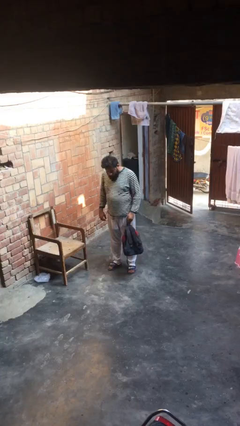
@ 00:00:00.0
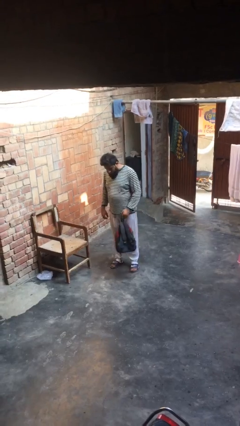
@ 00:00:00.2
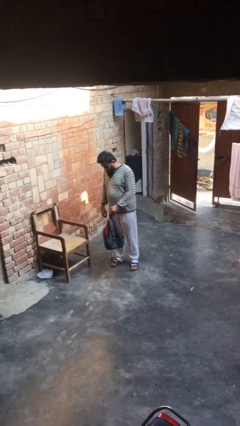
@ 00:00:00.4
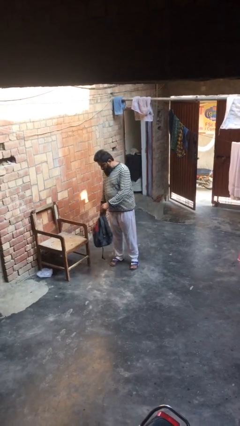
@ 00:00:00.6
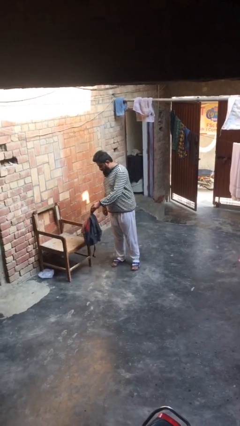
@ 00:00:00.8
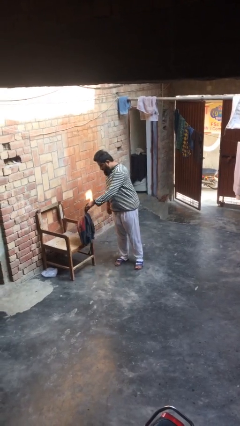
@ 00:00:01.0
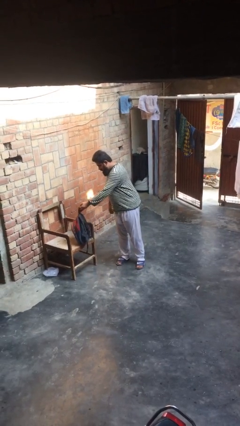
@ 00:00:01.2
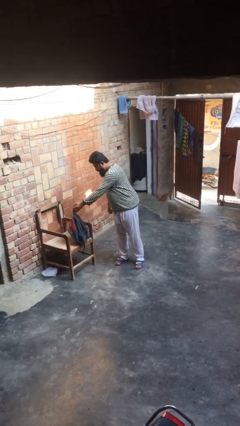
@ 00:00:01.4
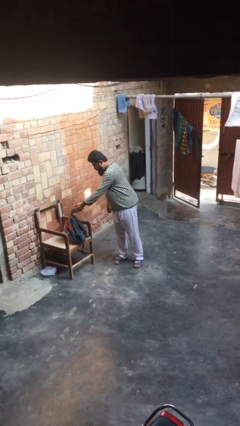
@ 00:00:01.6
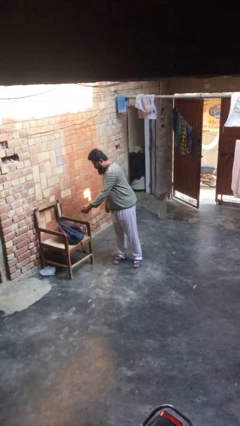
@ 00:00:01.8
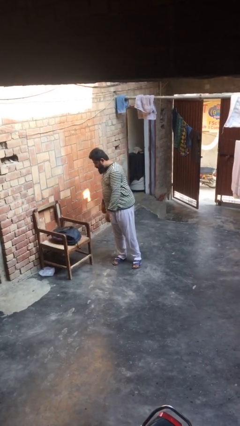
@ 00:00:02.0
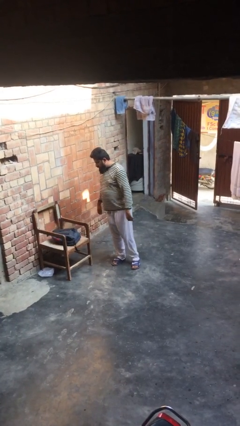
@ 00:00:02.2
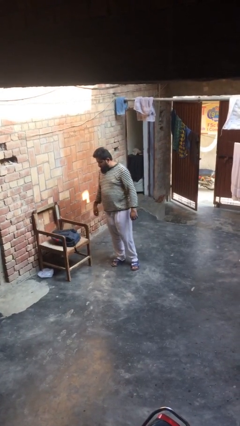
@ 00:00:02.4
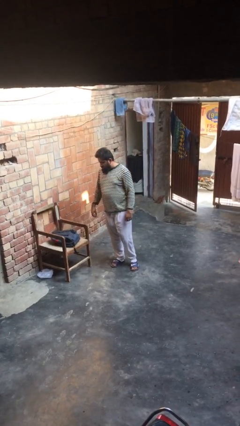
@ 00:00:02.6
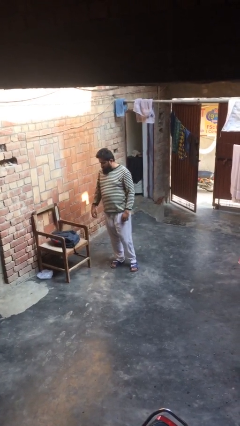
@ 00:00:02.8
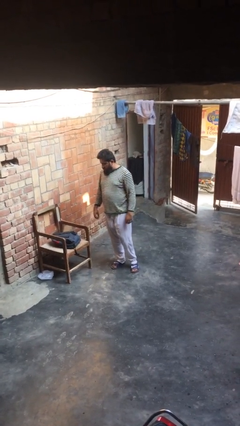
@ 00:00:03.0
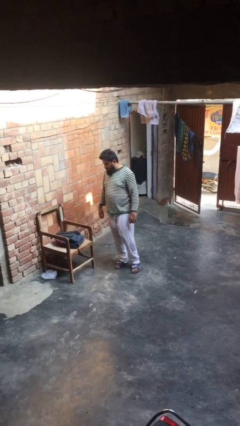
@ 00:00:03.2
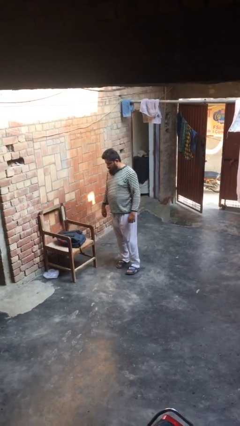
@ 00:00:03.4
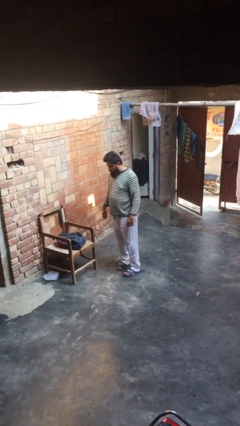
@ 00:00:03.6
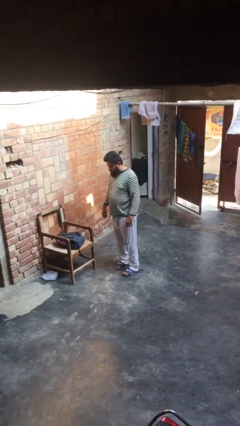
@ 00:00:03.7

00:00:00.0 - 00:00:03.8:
person puts down object on table

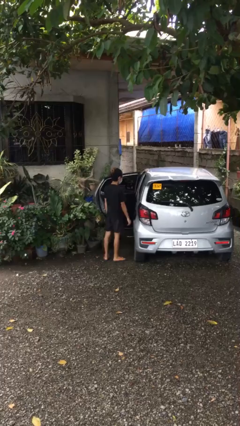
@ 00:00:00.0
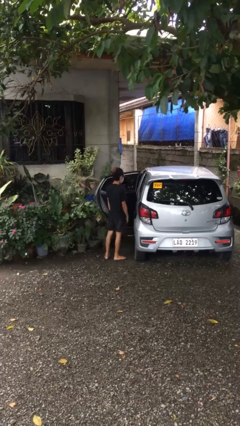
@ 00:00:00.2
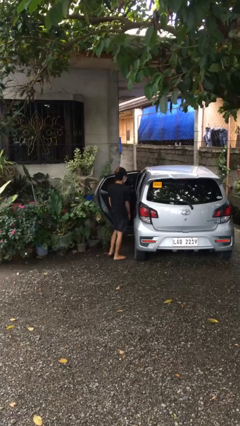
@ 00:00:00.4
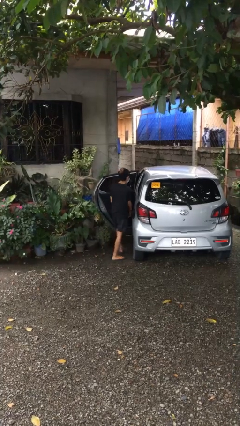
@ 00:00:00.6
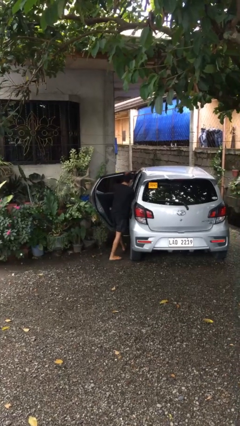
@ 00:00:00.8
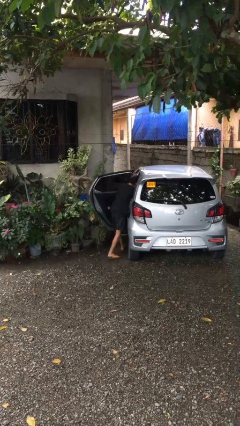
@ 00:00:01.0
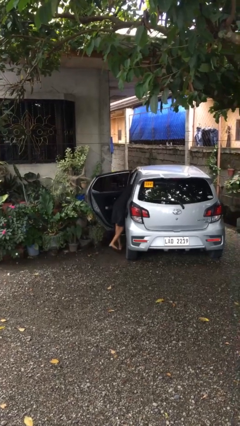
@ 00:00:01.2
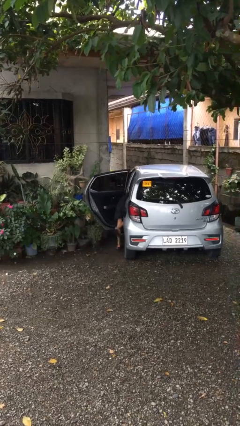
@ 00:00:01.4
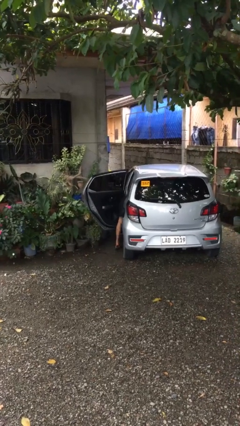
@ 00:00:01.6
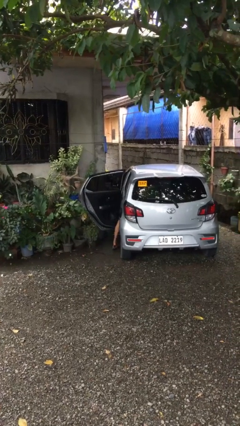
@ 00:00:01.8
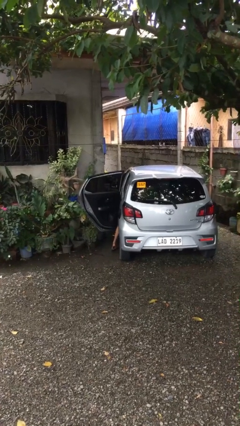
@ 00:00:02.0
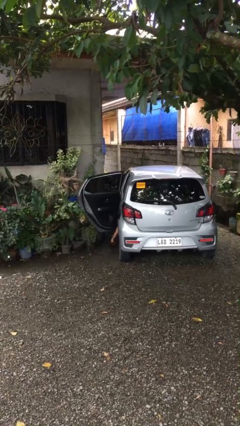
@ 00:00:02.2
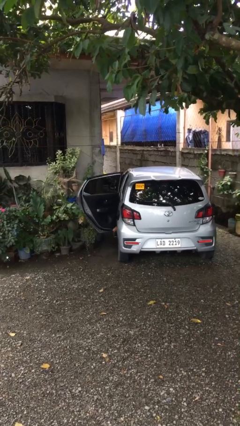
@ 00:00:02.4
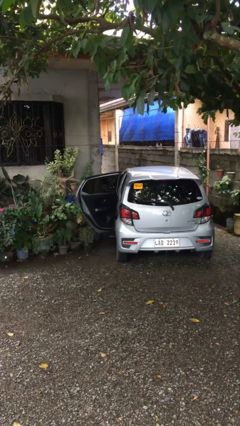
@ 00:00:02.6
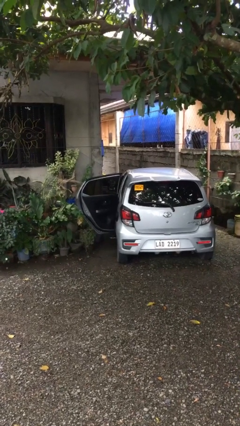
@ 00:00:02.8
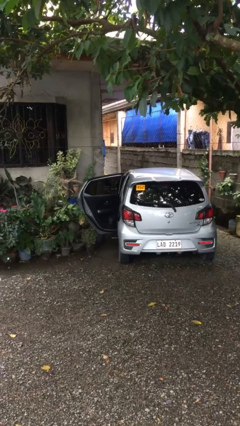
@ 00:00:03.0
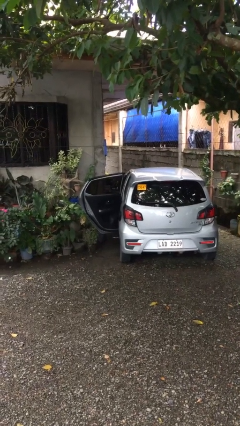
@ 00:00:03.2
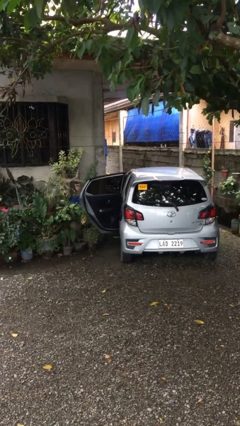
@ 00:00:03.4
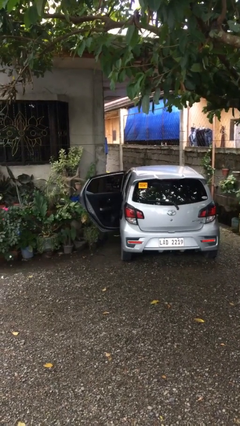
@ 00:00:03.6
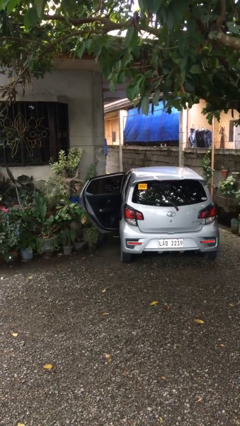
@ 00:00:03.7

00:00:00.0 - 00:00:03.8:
person enters car

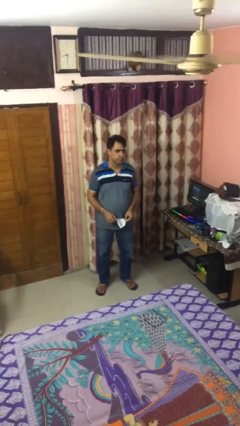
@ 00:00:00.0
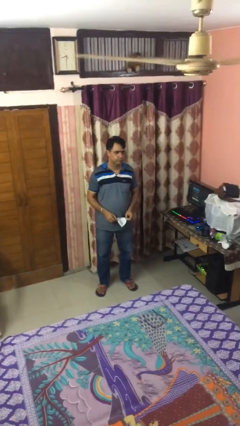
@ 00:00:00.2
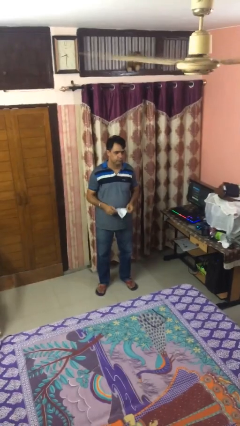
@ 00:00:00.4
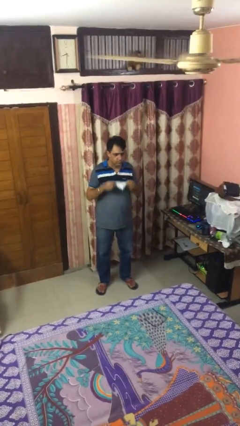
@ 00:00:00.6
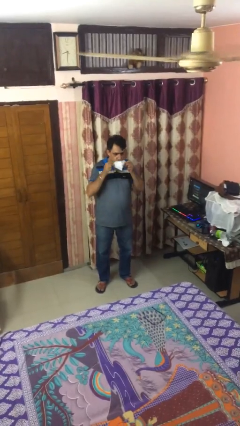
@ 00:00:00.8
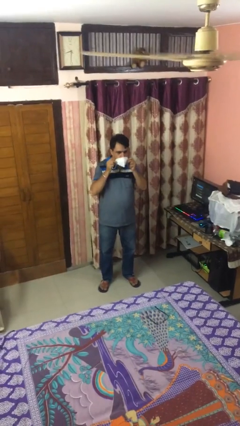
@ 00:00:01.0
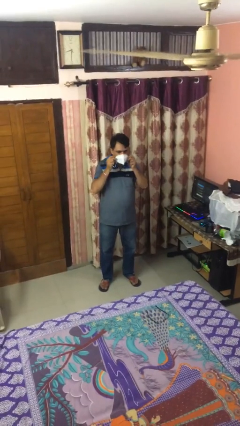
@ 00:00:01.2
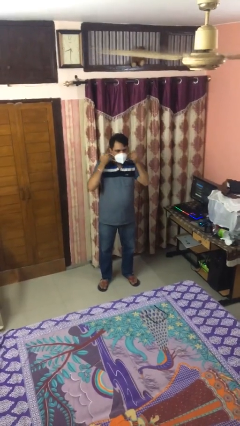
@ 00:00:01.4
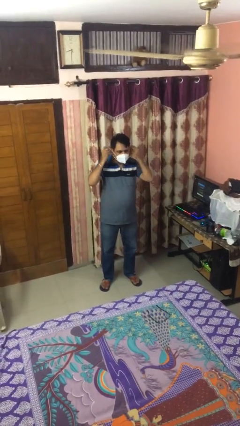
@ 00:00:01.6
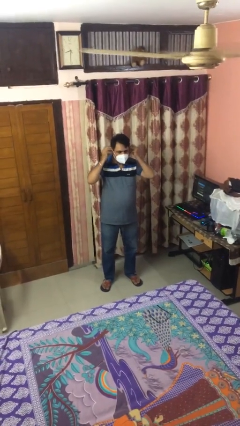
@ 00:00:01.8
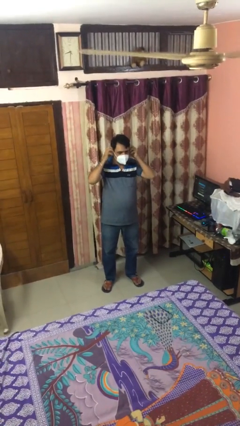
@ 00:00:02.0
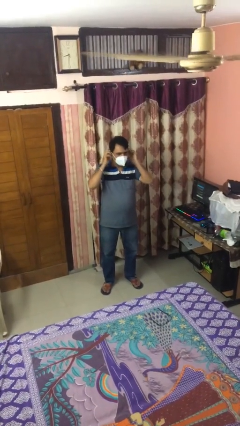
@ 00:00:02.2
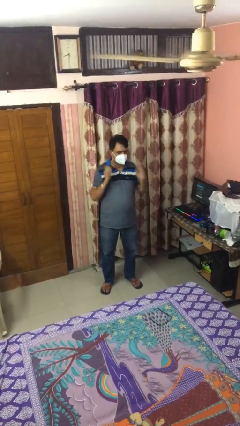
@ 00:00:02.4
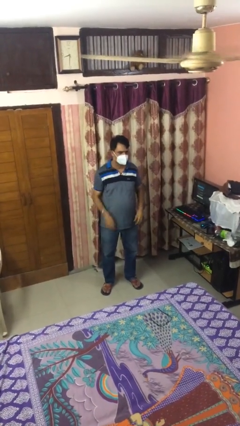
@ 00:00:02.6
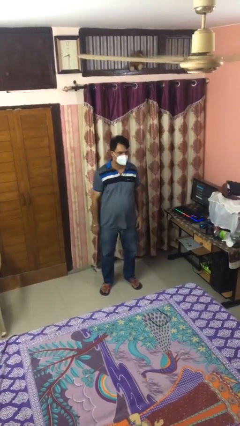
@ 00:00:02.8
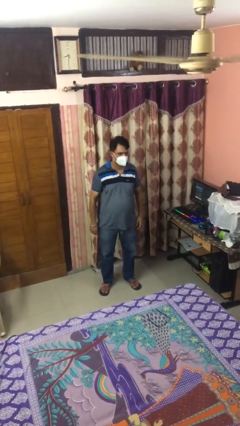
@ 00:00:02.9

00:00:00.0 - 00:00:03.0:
person puts on facemask

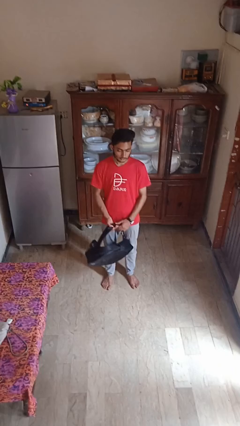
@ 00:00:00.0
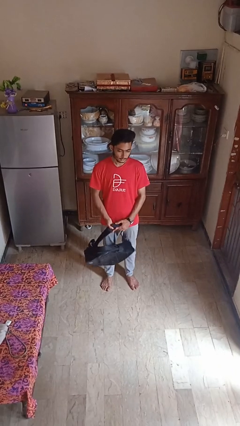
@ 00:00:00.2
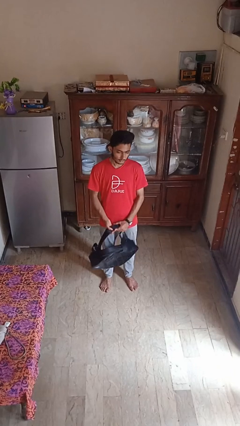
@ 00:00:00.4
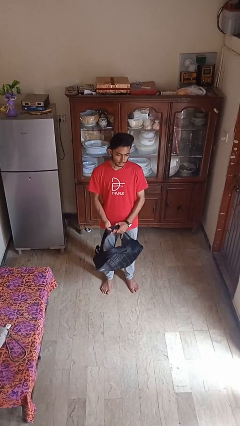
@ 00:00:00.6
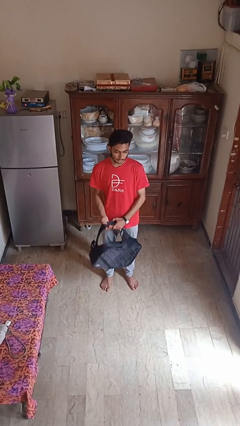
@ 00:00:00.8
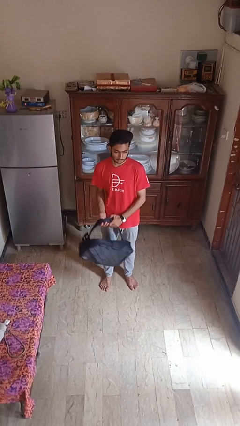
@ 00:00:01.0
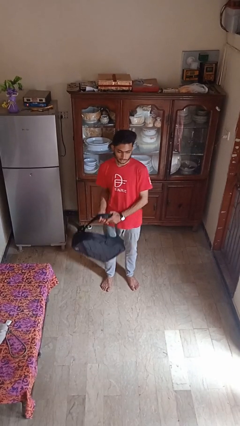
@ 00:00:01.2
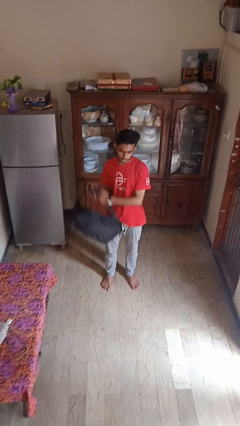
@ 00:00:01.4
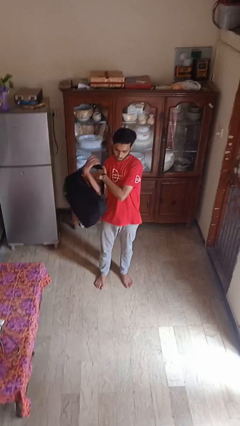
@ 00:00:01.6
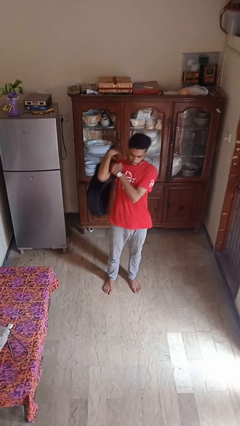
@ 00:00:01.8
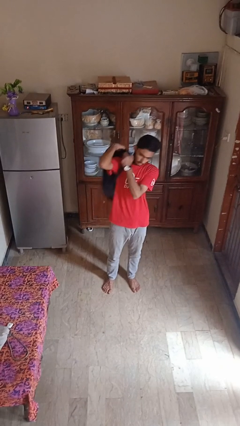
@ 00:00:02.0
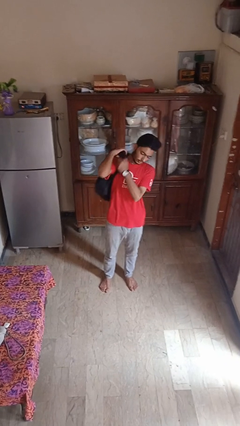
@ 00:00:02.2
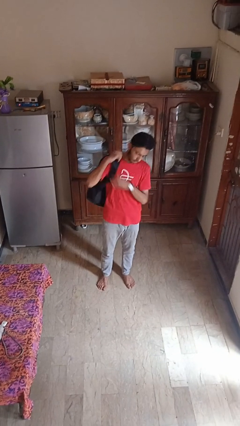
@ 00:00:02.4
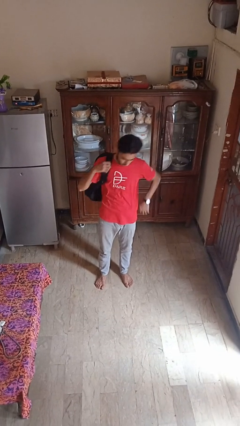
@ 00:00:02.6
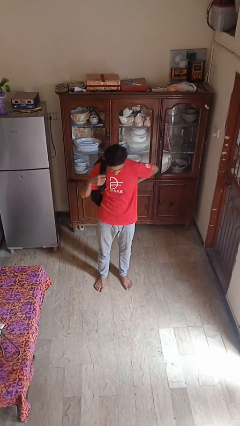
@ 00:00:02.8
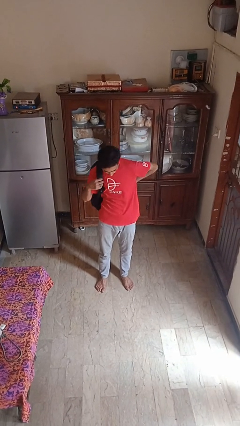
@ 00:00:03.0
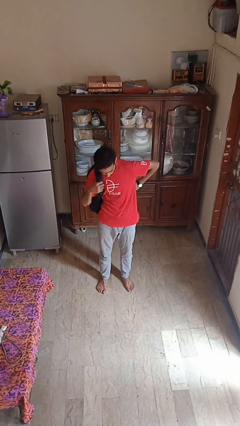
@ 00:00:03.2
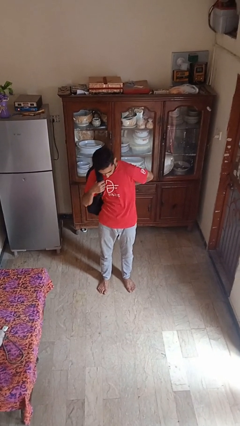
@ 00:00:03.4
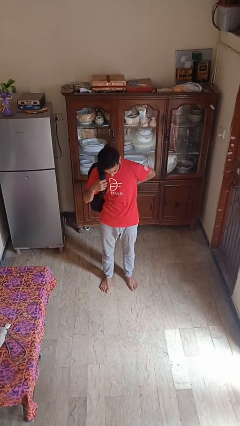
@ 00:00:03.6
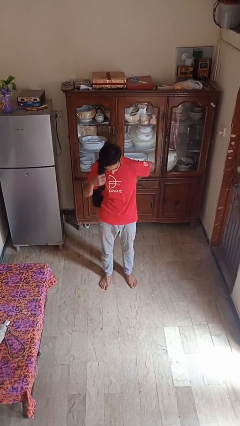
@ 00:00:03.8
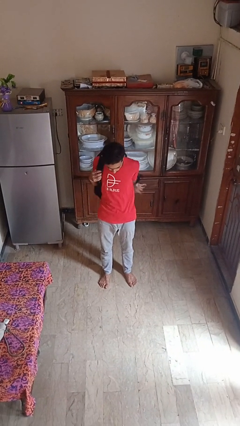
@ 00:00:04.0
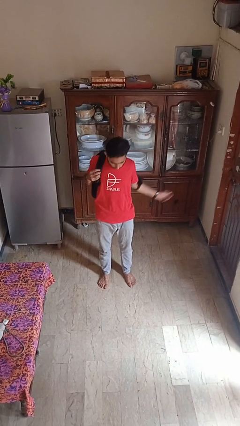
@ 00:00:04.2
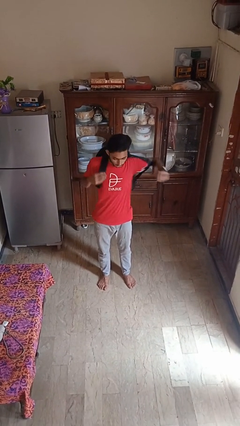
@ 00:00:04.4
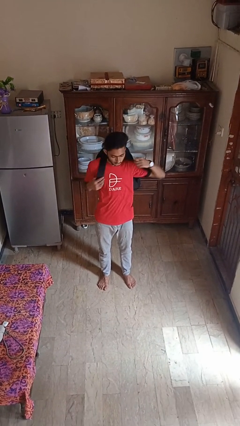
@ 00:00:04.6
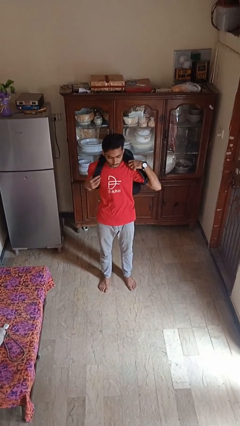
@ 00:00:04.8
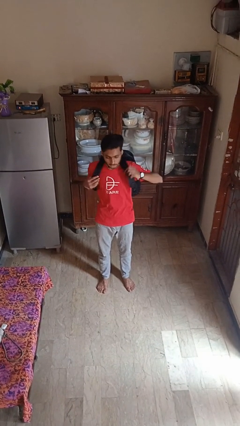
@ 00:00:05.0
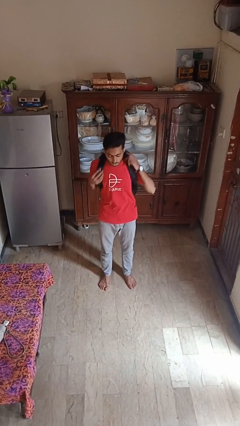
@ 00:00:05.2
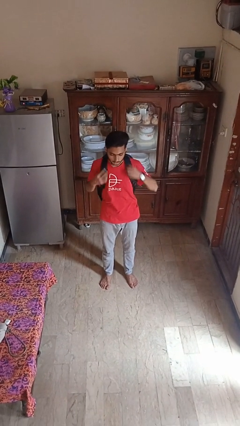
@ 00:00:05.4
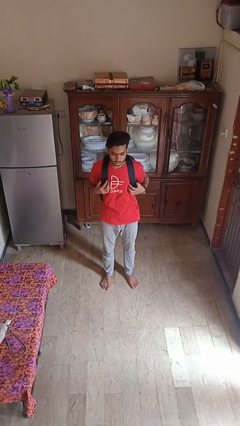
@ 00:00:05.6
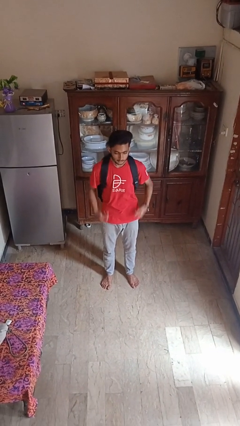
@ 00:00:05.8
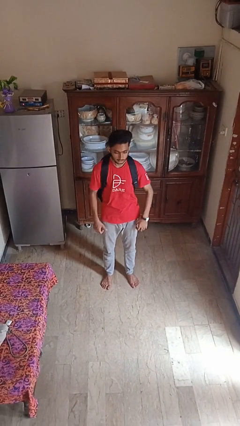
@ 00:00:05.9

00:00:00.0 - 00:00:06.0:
person puts on backpack

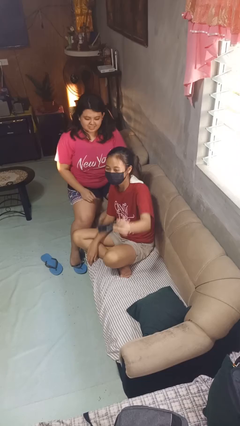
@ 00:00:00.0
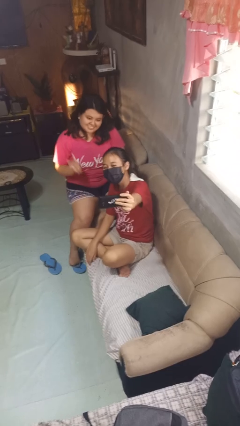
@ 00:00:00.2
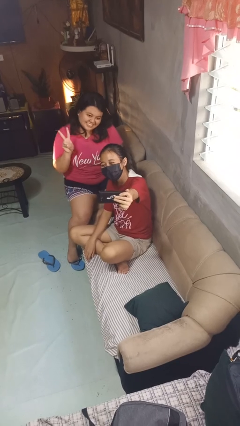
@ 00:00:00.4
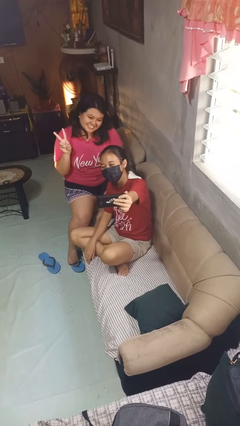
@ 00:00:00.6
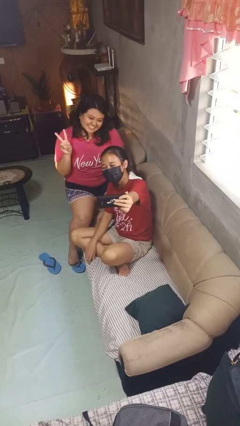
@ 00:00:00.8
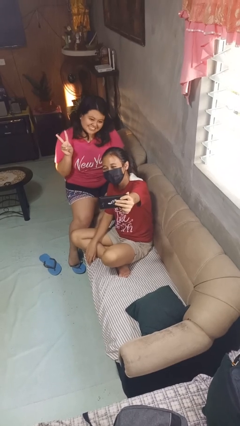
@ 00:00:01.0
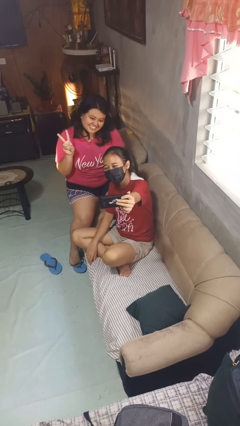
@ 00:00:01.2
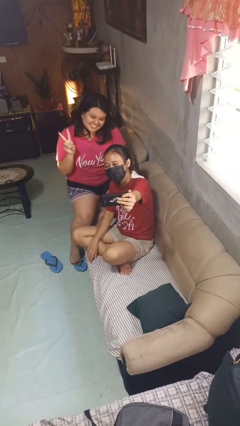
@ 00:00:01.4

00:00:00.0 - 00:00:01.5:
person takes selfie with person
